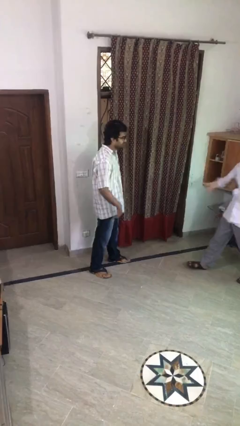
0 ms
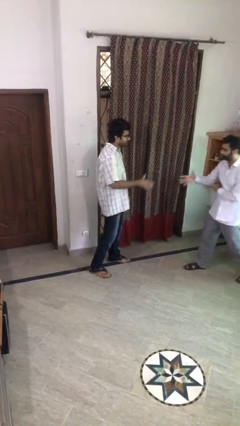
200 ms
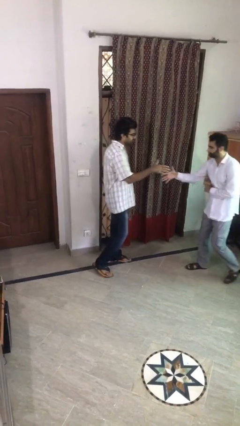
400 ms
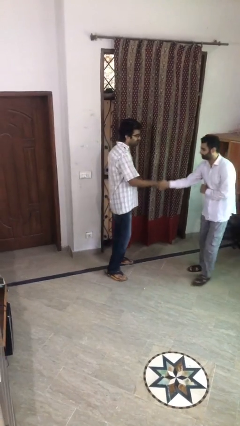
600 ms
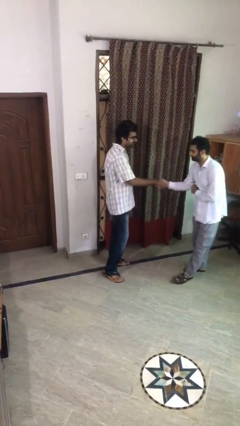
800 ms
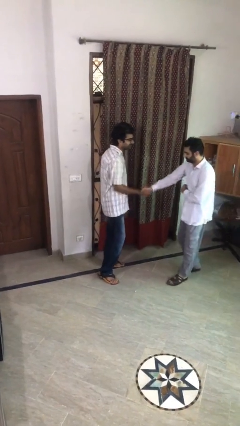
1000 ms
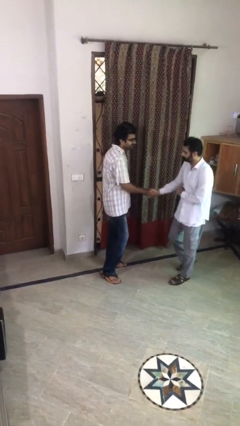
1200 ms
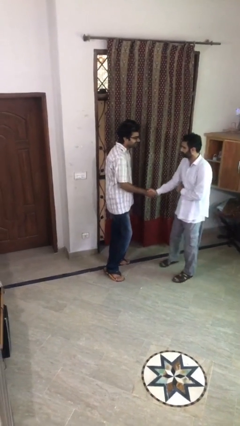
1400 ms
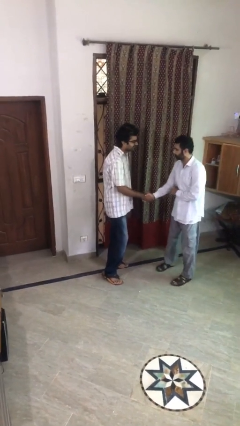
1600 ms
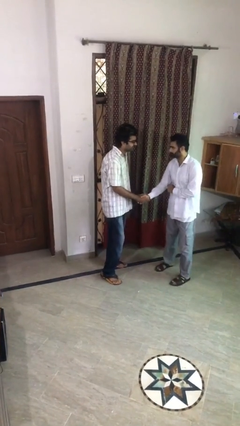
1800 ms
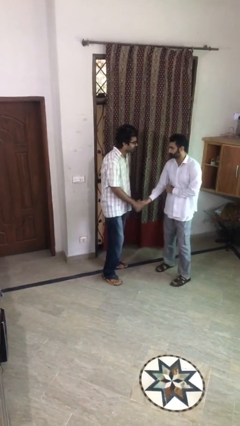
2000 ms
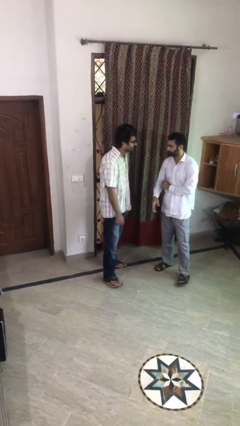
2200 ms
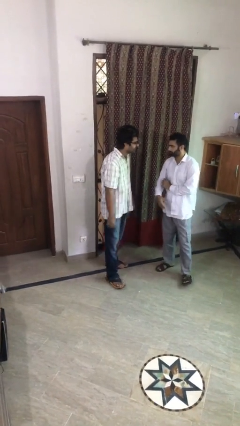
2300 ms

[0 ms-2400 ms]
person shakes hand

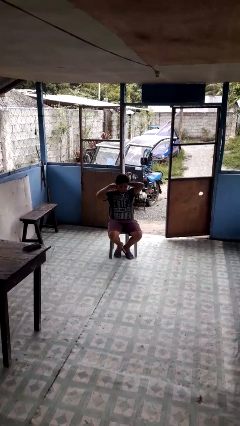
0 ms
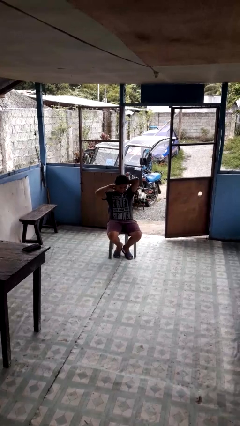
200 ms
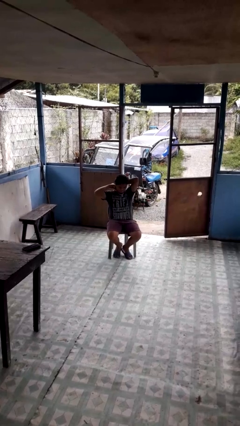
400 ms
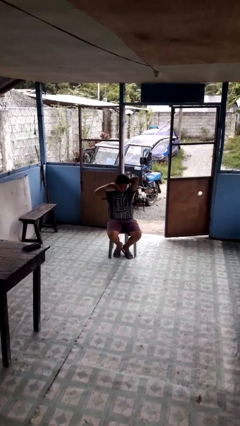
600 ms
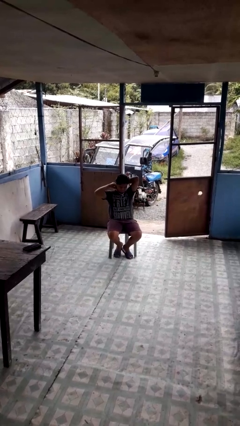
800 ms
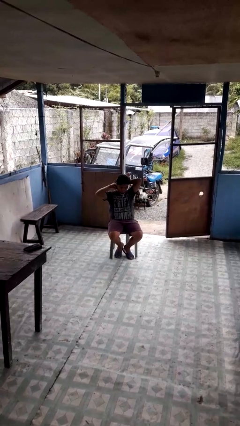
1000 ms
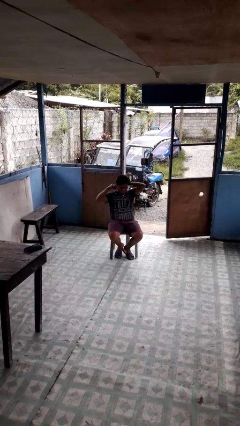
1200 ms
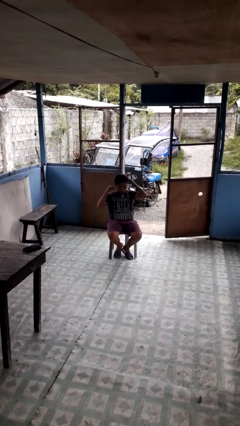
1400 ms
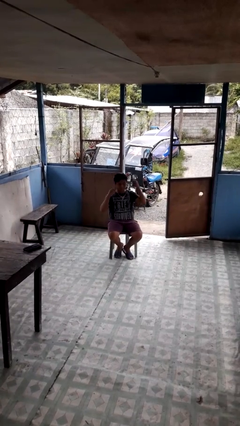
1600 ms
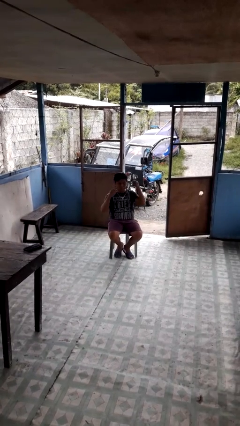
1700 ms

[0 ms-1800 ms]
person takes off necklace

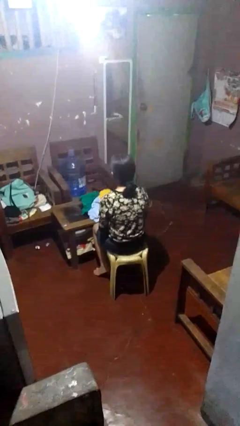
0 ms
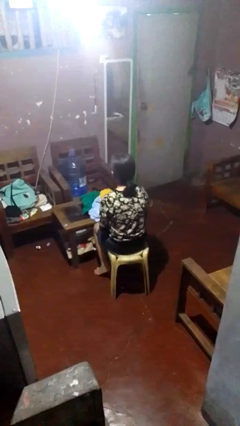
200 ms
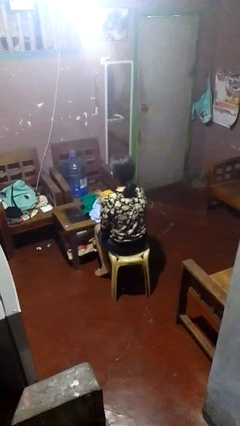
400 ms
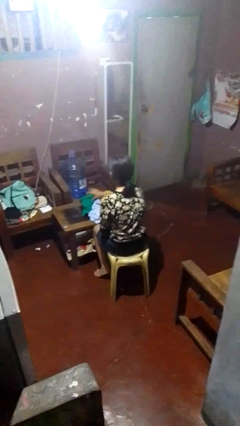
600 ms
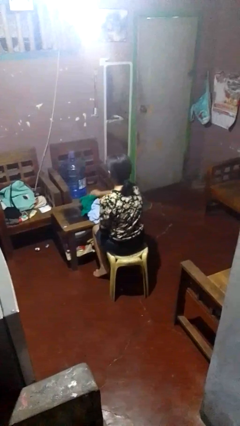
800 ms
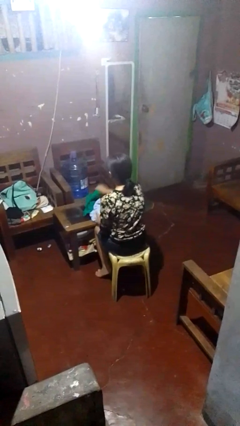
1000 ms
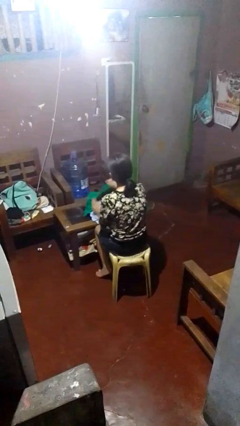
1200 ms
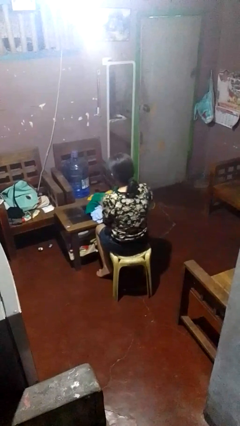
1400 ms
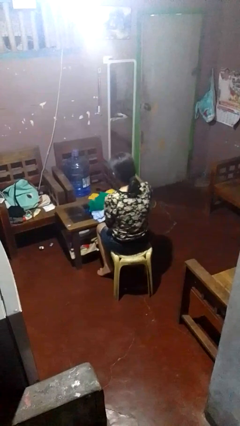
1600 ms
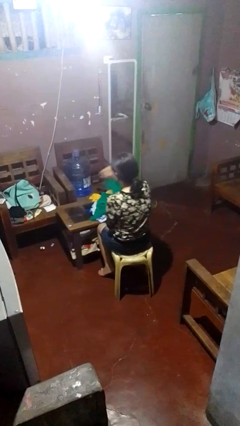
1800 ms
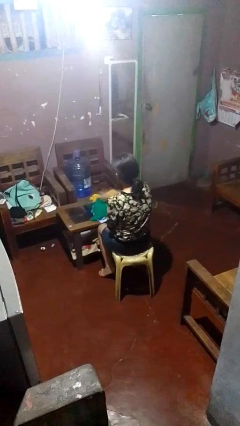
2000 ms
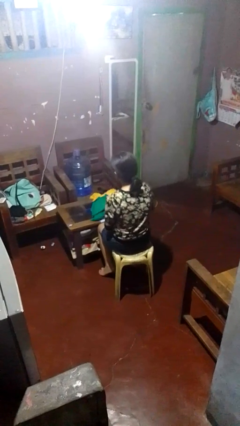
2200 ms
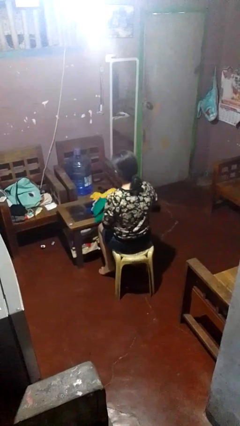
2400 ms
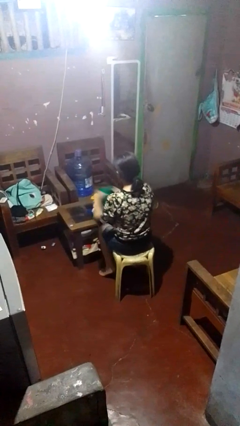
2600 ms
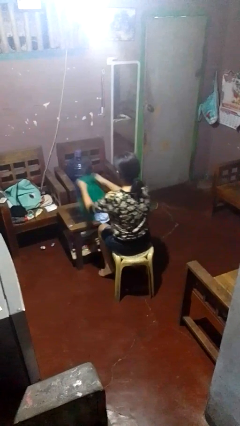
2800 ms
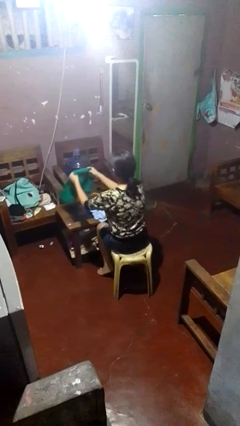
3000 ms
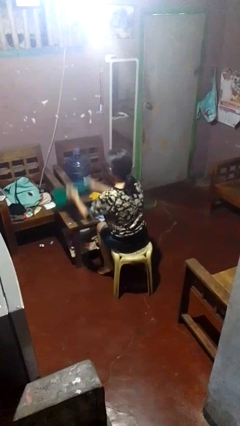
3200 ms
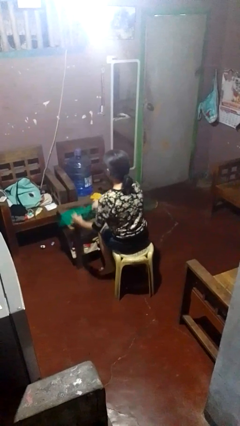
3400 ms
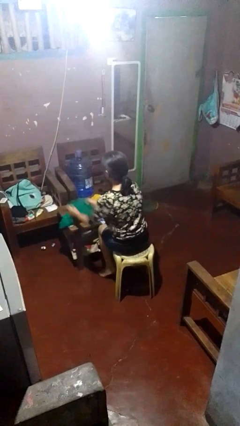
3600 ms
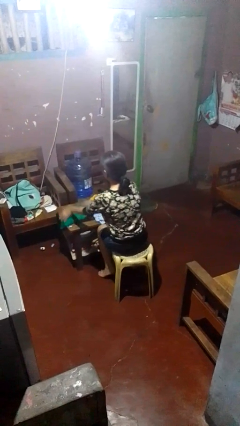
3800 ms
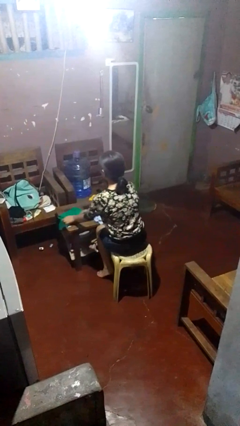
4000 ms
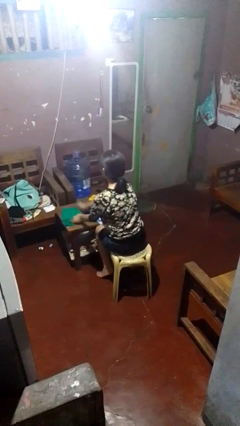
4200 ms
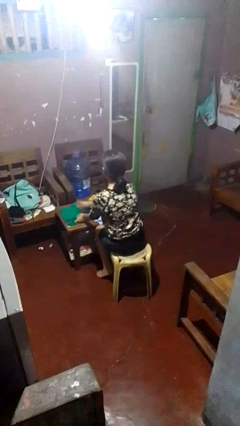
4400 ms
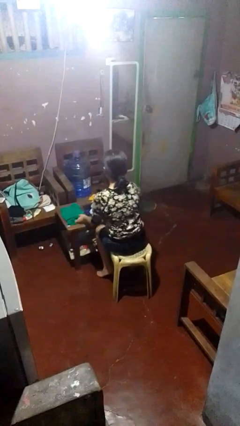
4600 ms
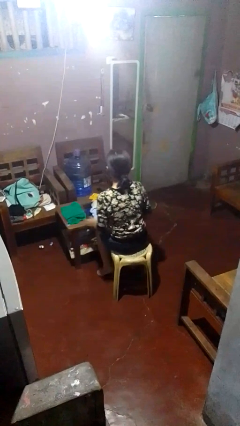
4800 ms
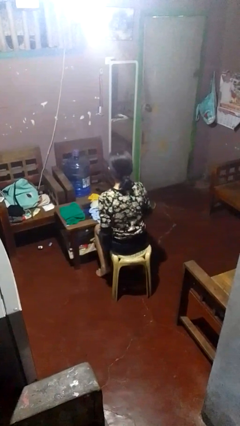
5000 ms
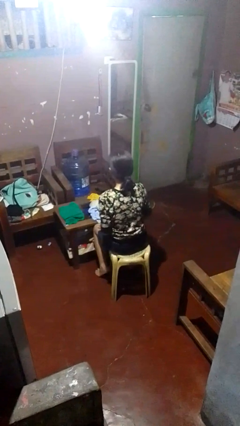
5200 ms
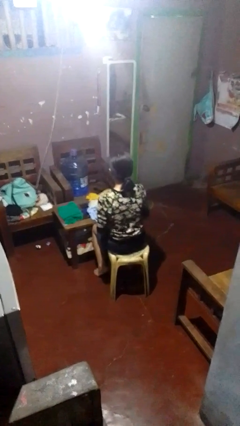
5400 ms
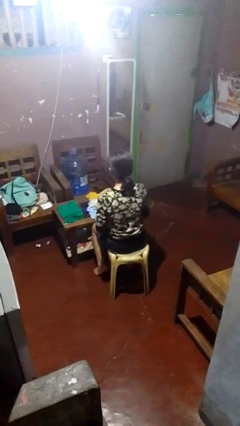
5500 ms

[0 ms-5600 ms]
person folds shirt

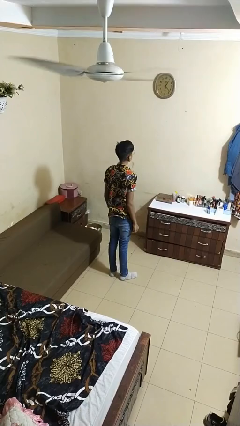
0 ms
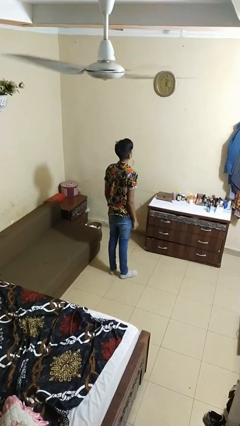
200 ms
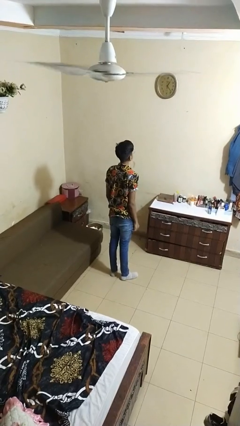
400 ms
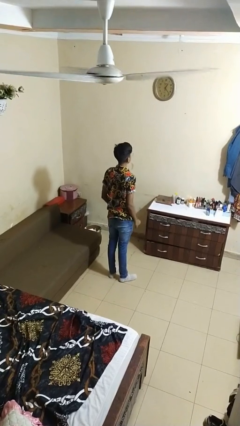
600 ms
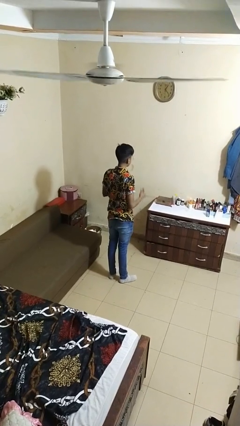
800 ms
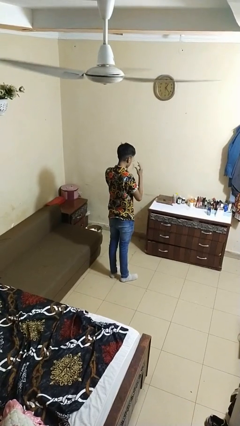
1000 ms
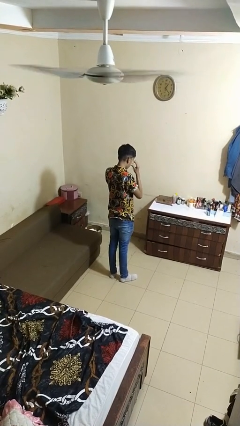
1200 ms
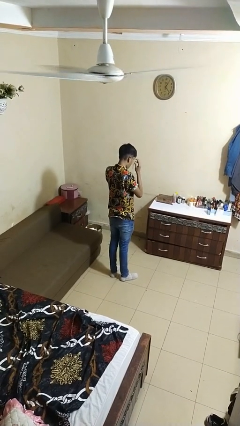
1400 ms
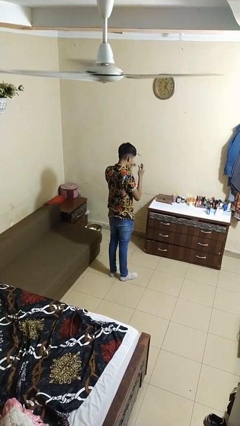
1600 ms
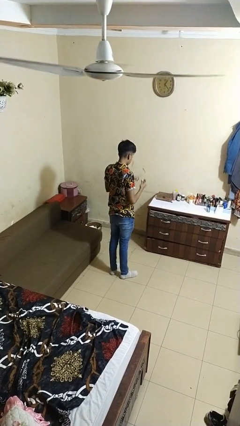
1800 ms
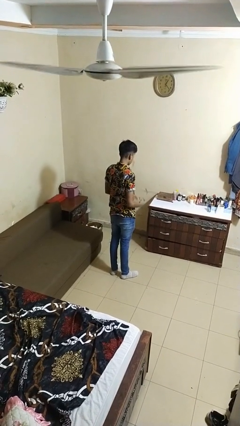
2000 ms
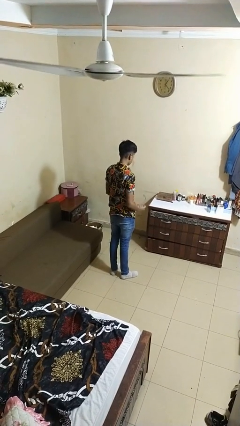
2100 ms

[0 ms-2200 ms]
person takes off glasses

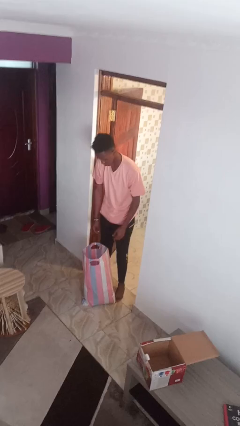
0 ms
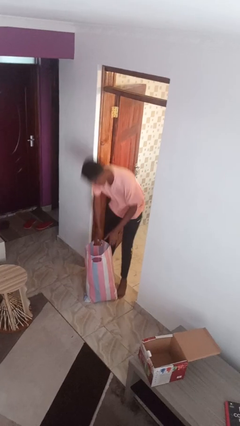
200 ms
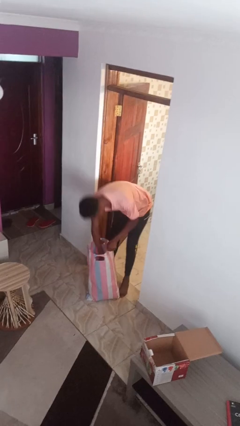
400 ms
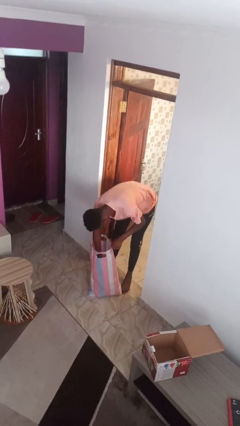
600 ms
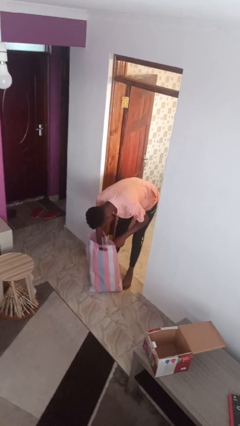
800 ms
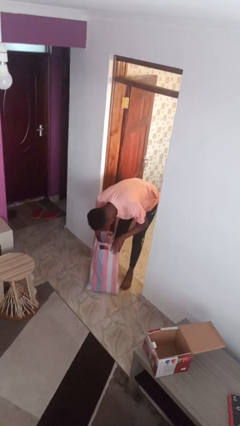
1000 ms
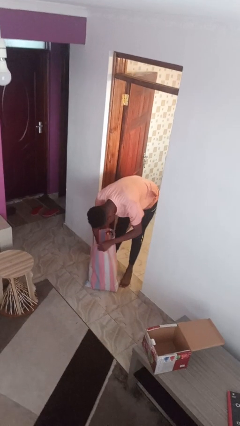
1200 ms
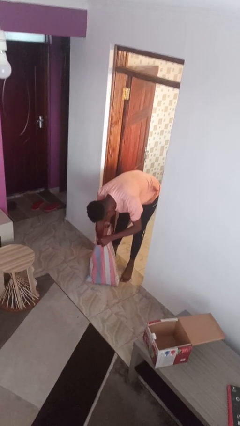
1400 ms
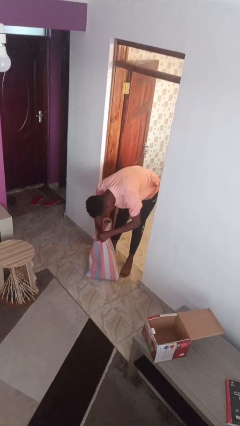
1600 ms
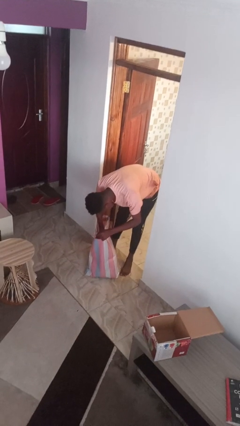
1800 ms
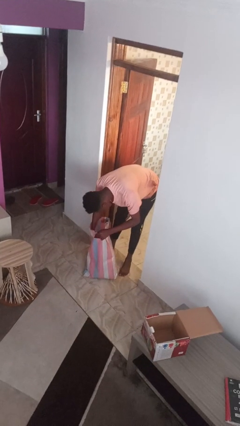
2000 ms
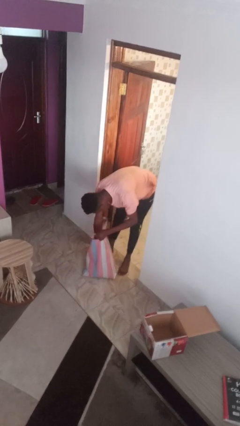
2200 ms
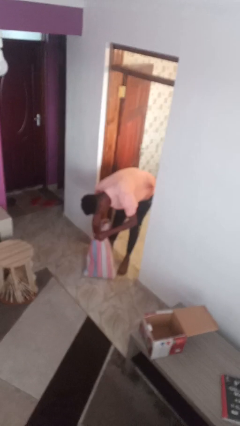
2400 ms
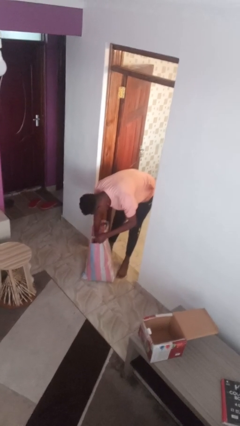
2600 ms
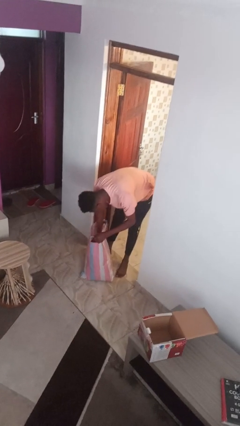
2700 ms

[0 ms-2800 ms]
person searches in bag

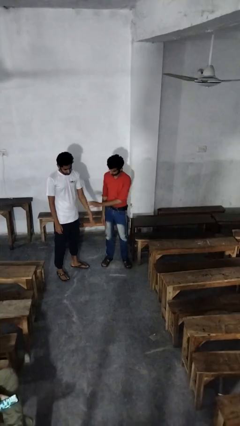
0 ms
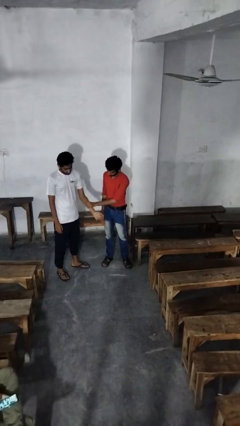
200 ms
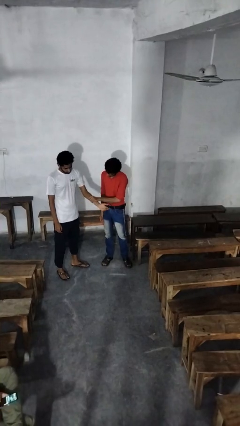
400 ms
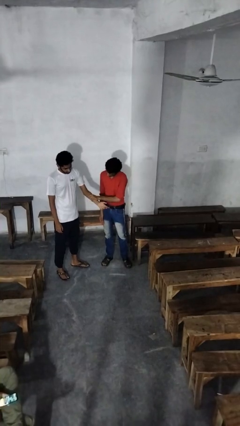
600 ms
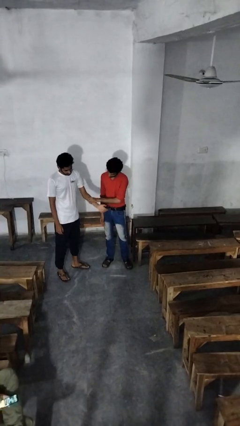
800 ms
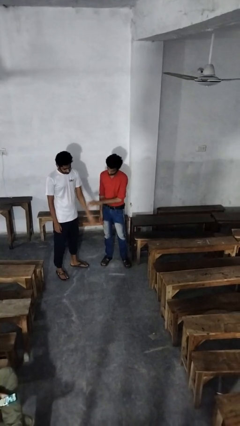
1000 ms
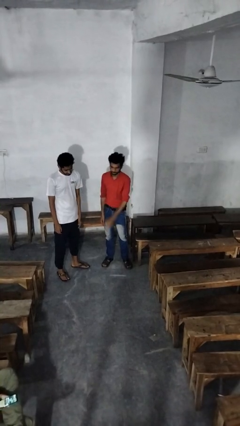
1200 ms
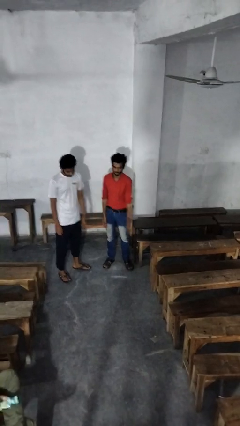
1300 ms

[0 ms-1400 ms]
person grabs person by forearm

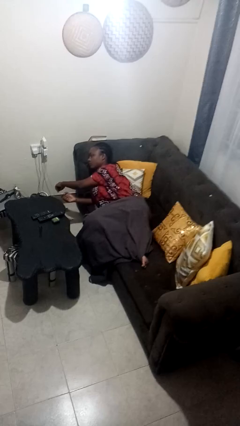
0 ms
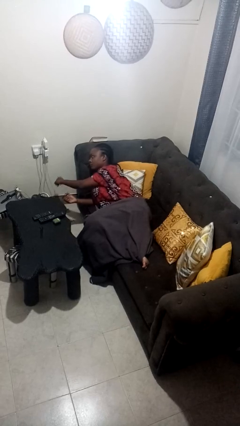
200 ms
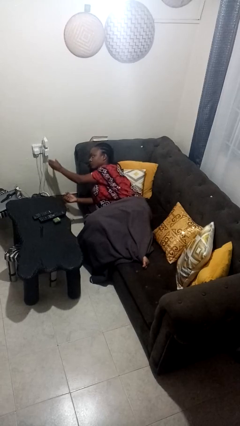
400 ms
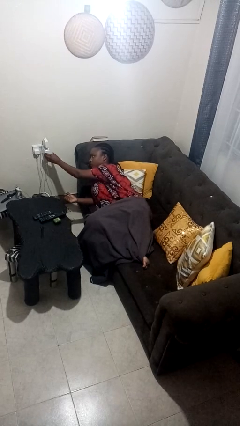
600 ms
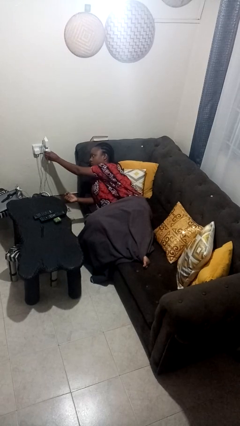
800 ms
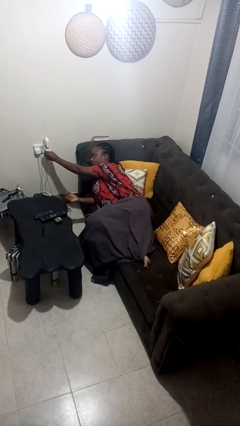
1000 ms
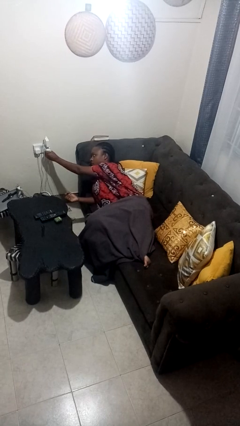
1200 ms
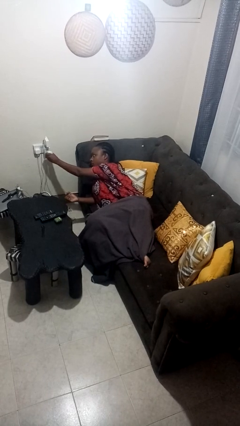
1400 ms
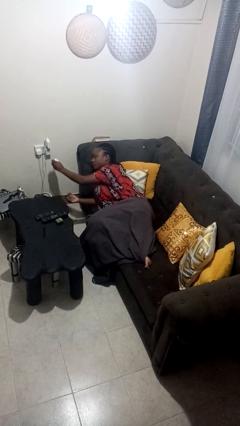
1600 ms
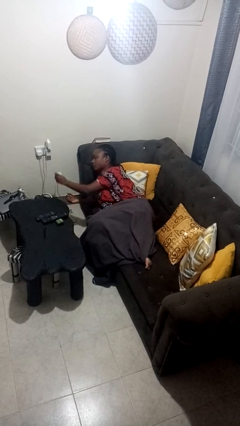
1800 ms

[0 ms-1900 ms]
person unplugs from electrical socket
